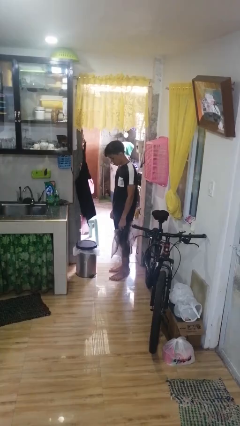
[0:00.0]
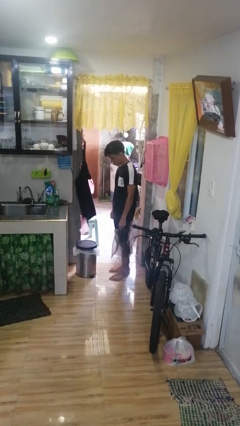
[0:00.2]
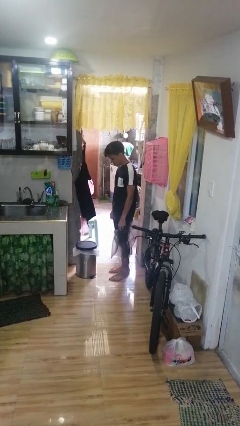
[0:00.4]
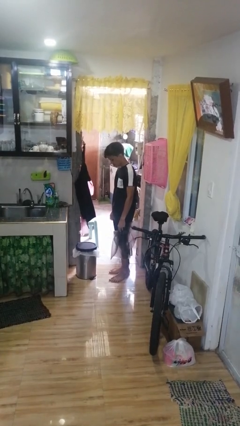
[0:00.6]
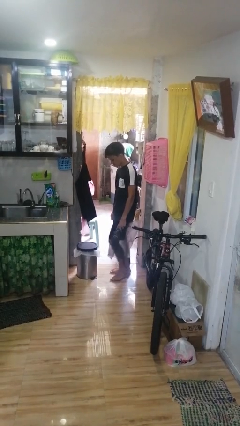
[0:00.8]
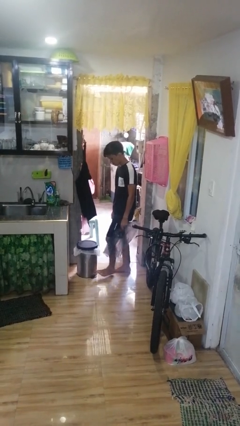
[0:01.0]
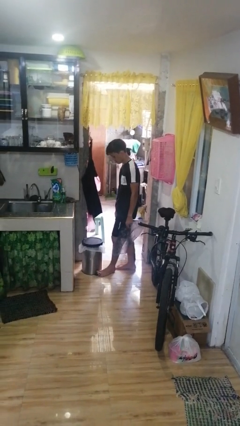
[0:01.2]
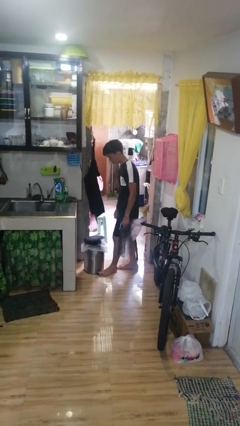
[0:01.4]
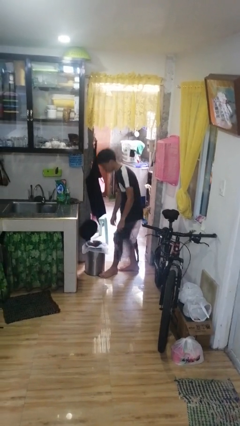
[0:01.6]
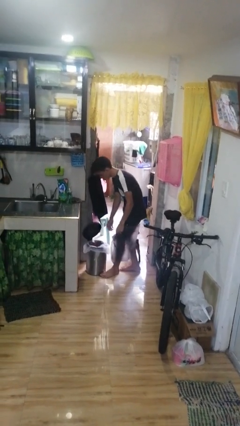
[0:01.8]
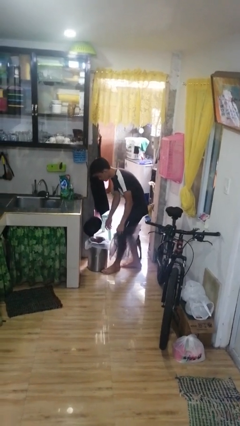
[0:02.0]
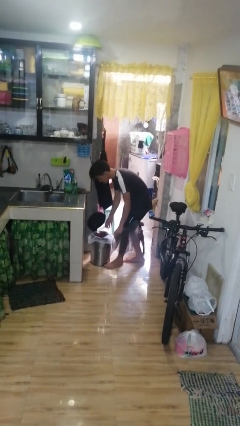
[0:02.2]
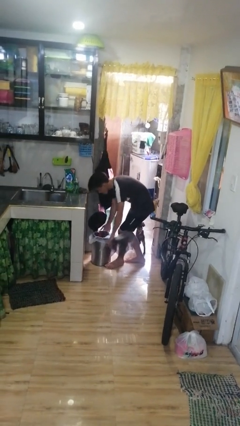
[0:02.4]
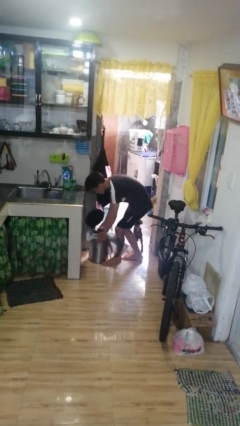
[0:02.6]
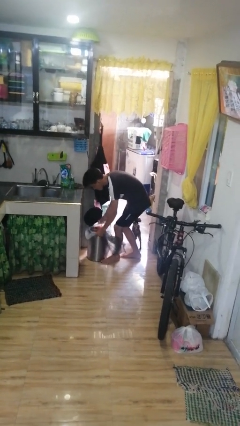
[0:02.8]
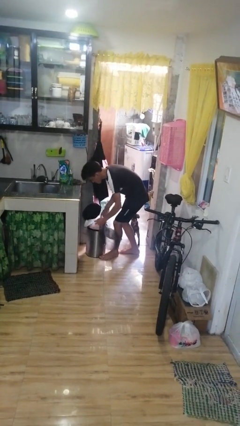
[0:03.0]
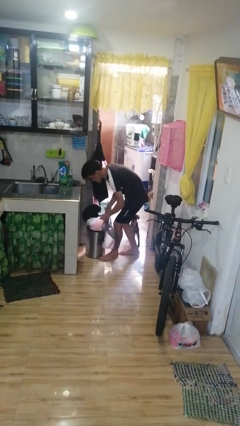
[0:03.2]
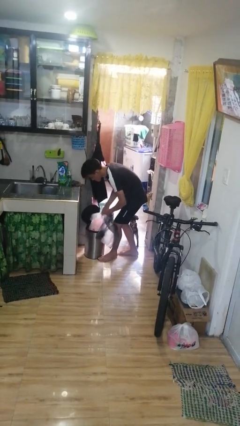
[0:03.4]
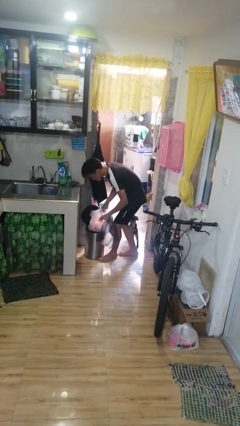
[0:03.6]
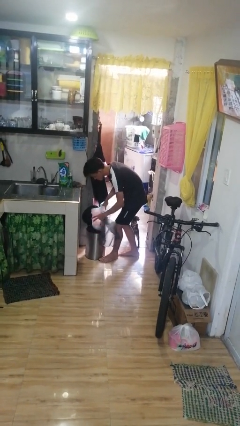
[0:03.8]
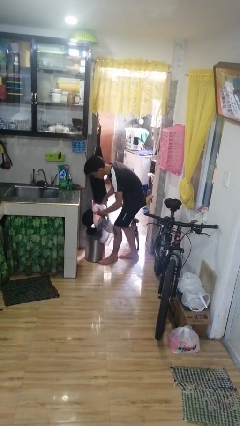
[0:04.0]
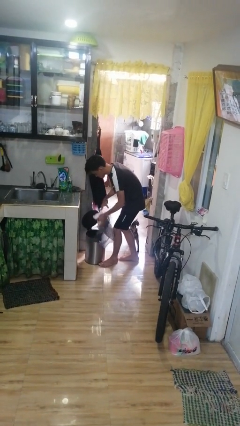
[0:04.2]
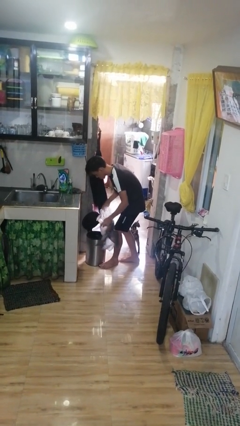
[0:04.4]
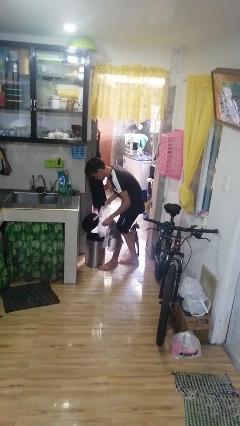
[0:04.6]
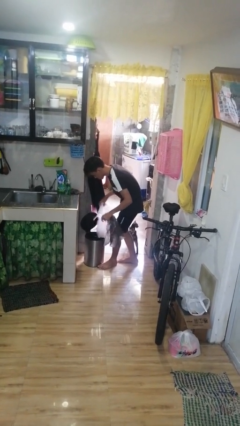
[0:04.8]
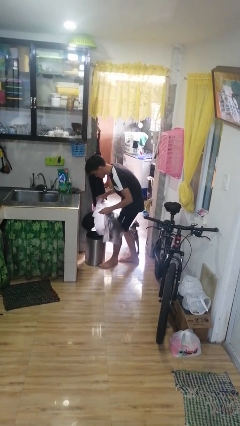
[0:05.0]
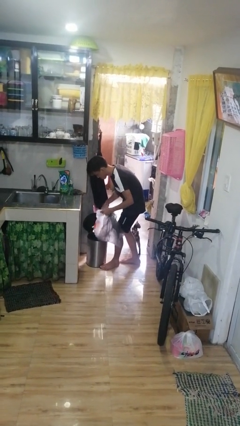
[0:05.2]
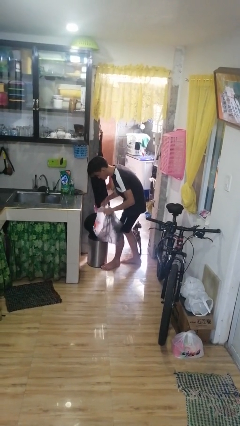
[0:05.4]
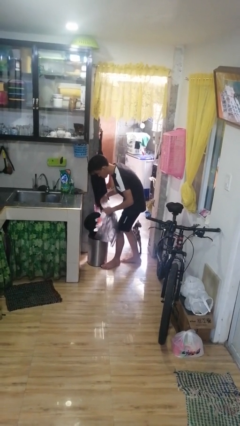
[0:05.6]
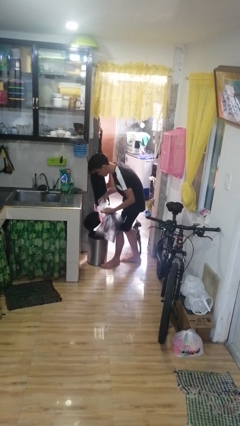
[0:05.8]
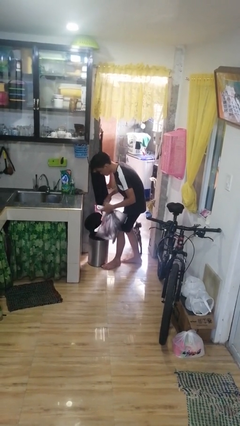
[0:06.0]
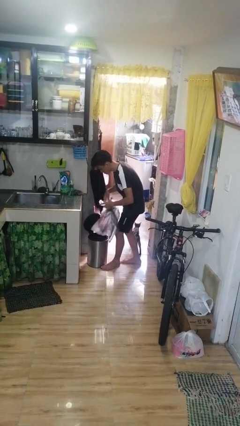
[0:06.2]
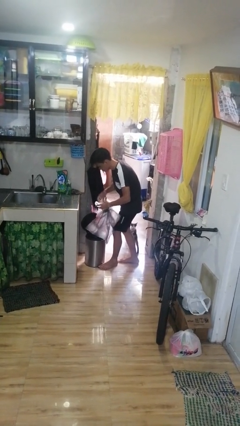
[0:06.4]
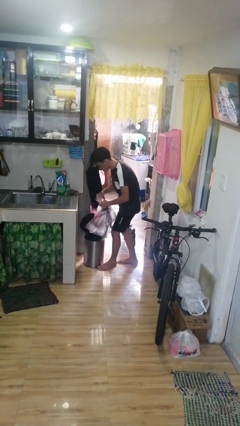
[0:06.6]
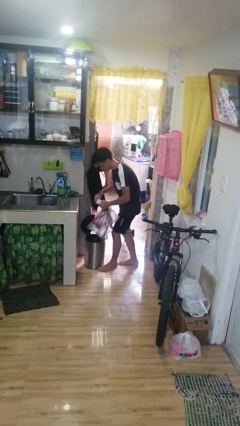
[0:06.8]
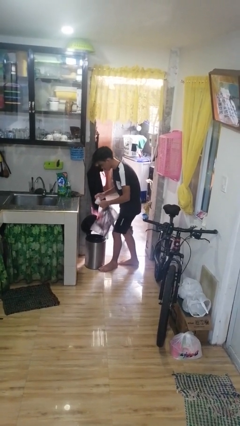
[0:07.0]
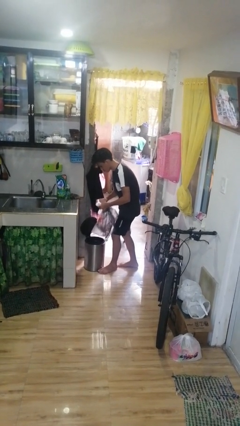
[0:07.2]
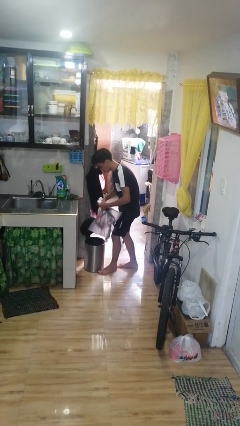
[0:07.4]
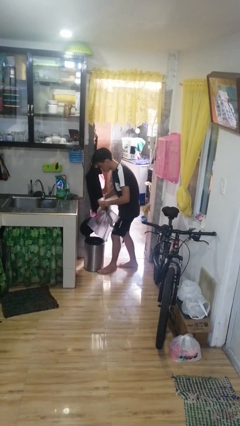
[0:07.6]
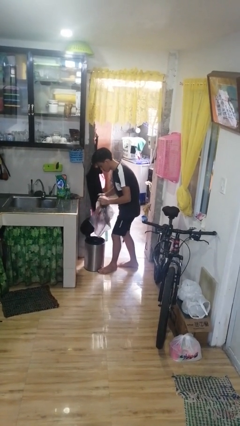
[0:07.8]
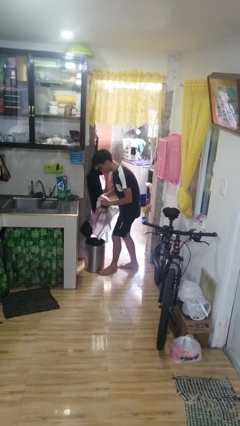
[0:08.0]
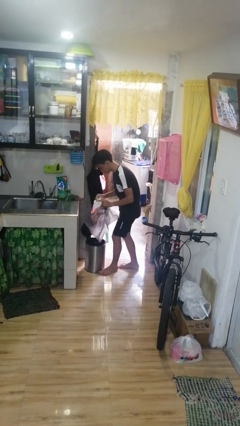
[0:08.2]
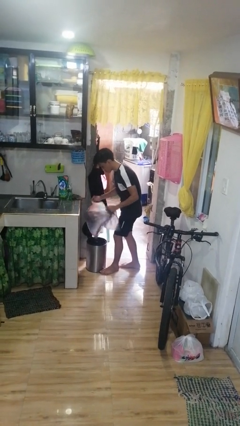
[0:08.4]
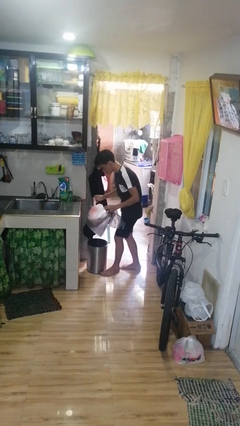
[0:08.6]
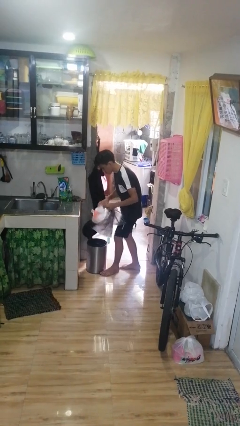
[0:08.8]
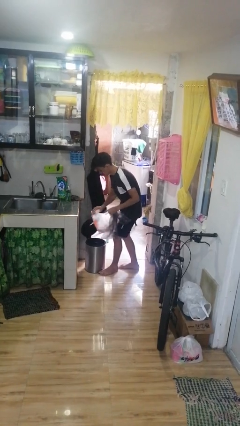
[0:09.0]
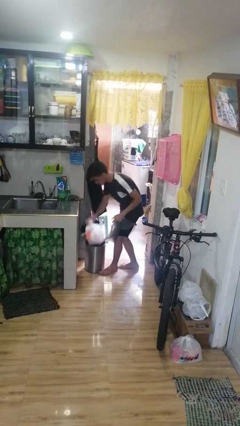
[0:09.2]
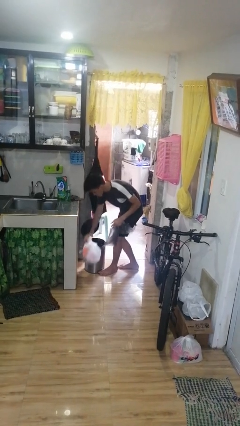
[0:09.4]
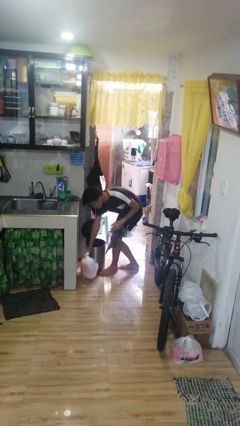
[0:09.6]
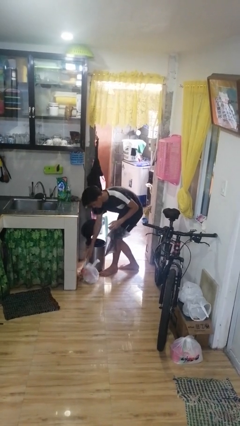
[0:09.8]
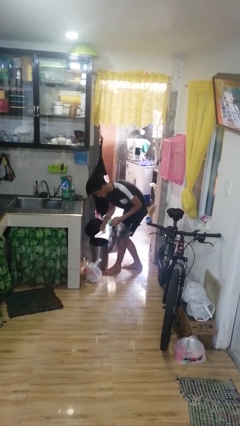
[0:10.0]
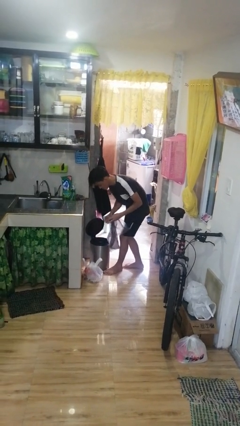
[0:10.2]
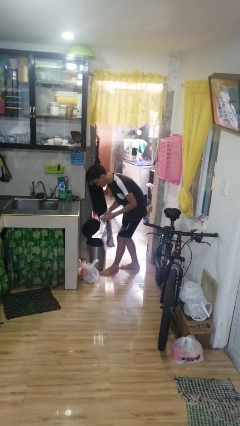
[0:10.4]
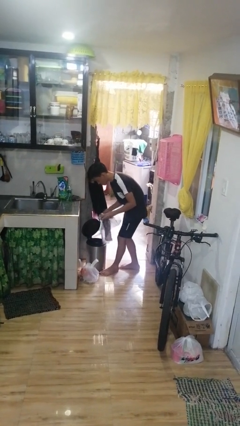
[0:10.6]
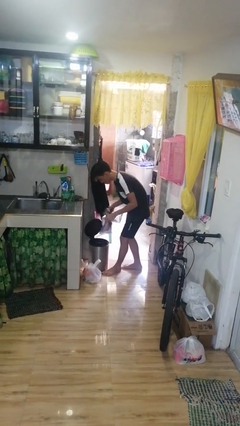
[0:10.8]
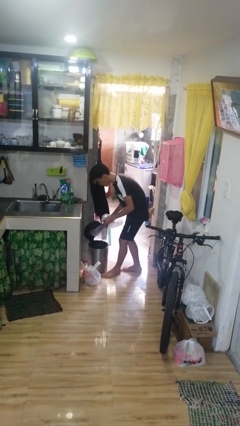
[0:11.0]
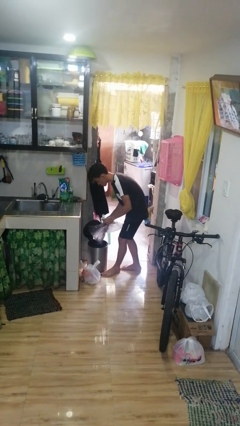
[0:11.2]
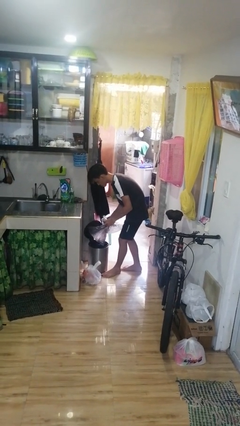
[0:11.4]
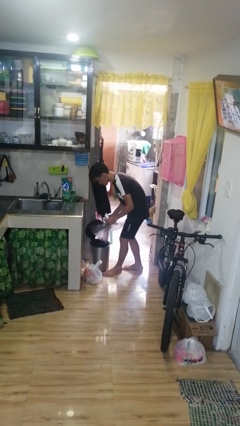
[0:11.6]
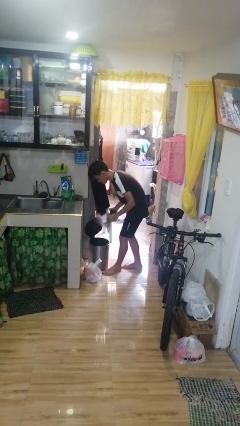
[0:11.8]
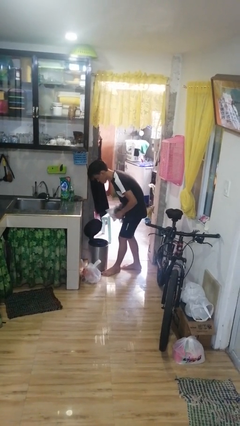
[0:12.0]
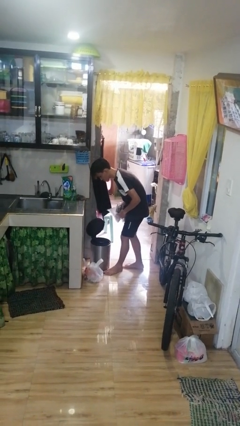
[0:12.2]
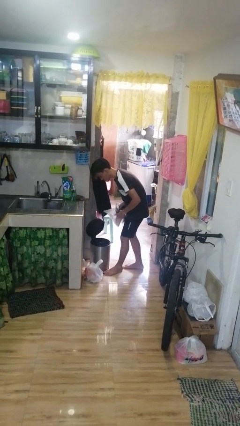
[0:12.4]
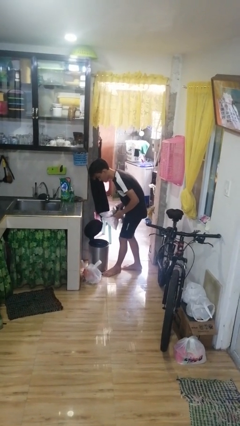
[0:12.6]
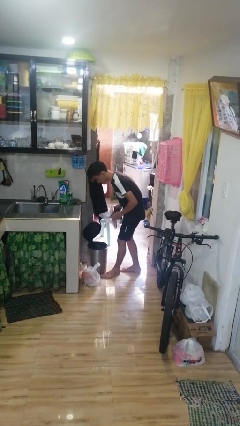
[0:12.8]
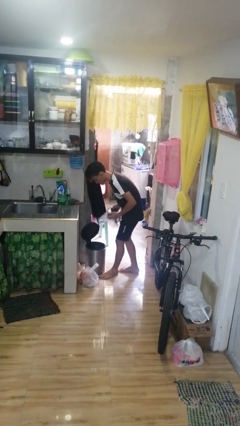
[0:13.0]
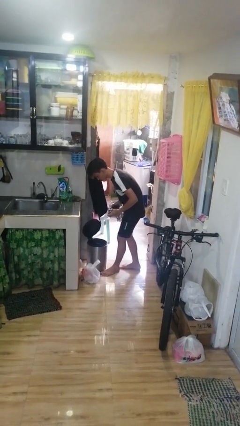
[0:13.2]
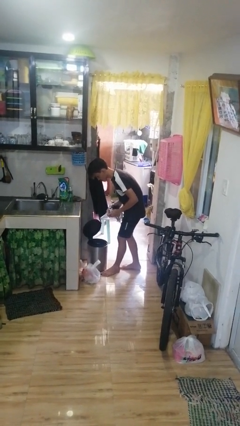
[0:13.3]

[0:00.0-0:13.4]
person removes trashbag from trashcan

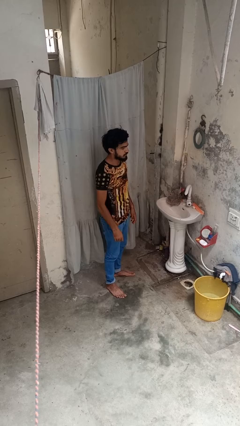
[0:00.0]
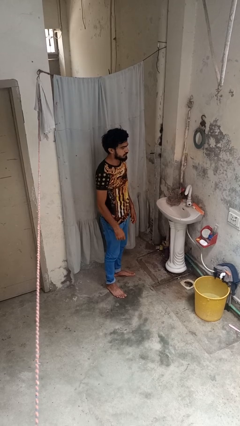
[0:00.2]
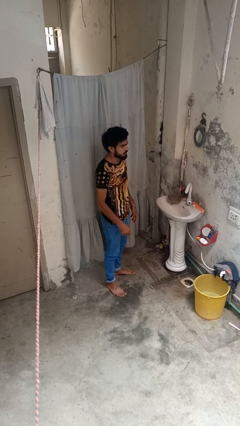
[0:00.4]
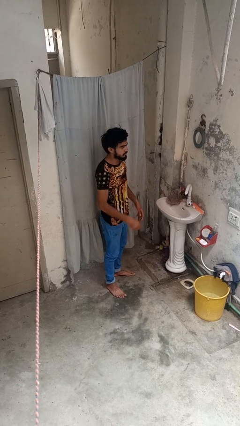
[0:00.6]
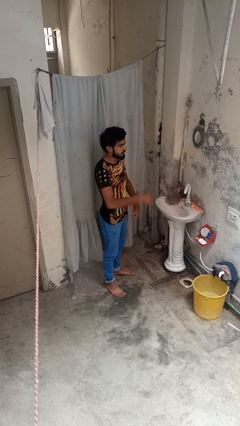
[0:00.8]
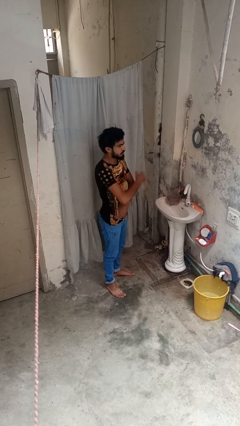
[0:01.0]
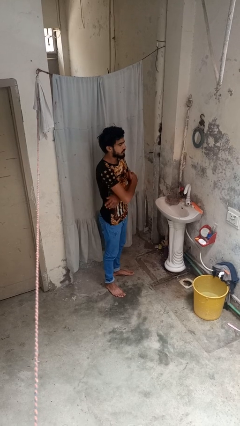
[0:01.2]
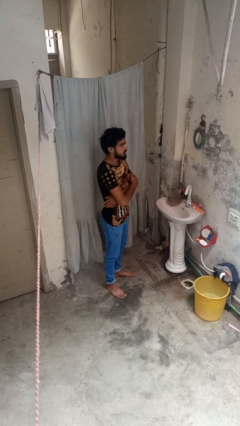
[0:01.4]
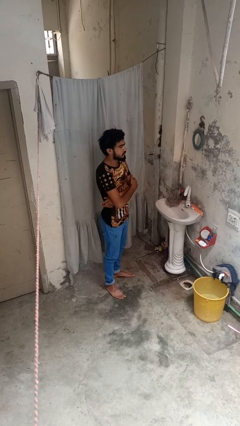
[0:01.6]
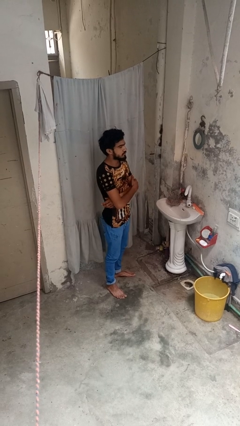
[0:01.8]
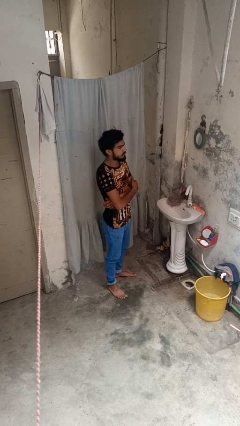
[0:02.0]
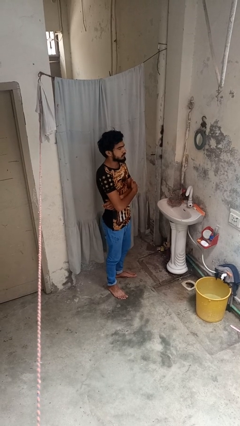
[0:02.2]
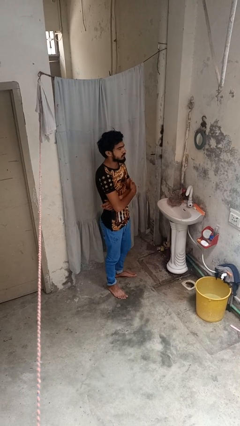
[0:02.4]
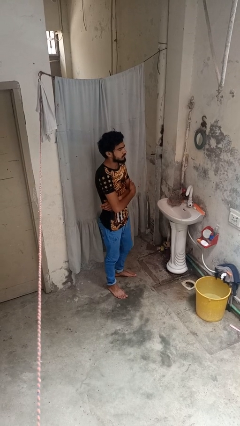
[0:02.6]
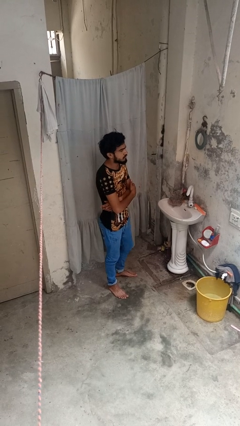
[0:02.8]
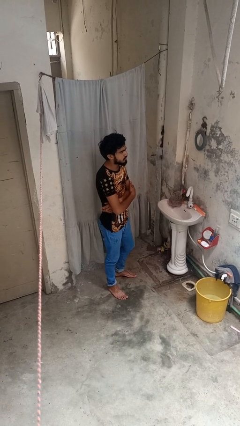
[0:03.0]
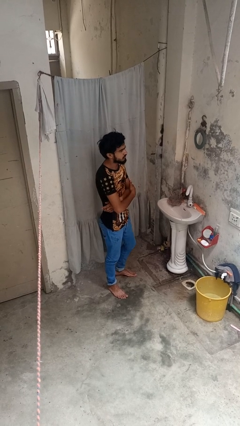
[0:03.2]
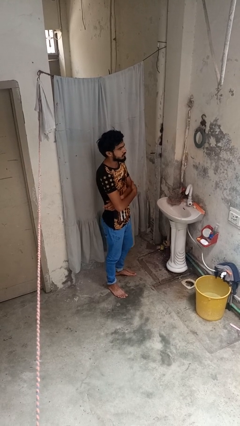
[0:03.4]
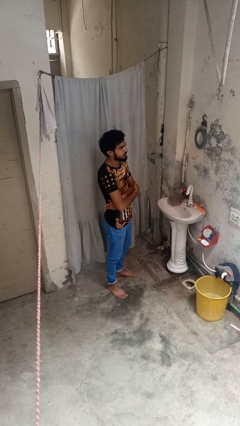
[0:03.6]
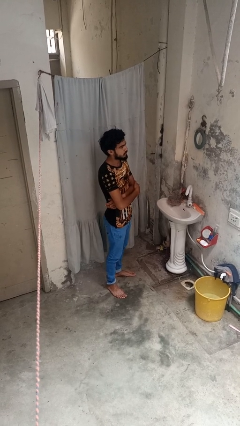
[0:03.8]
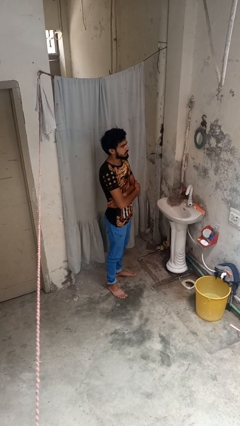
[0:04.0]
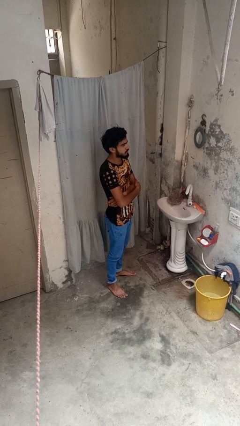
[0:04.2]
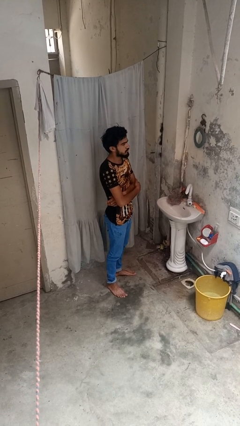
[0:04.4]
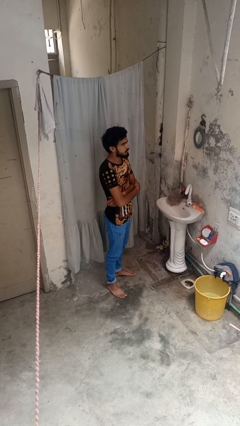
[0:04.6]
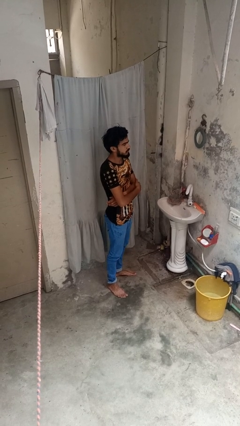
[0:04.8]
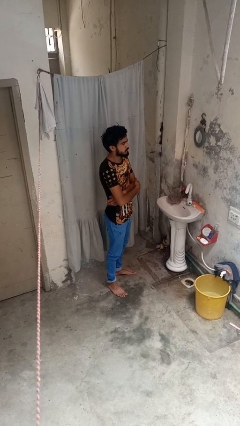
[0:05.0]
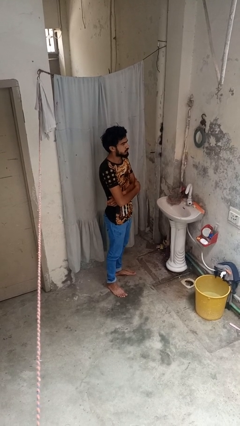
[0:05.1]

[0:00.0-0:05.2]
person crosses arms
